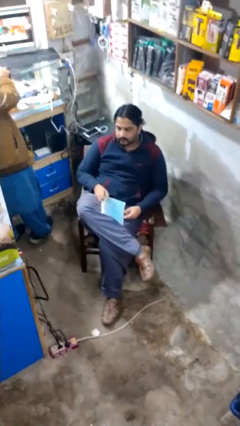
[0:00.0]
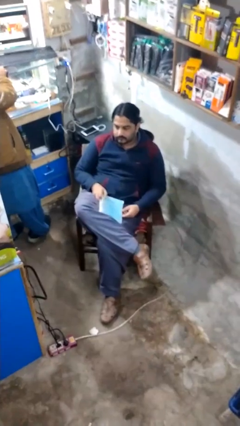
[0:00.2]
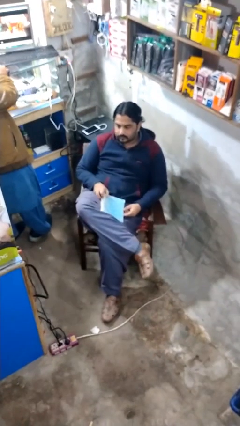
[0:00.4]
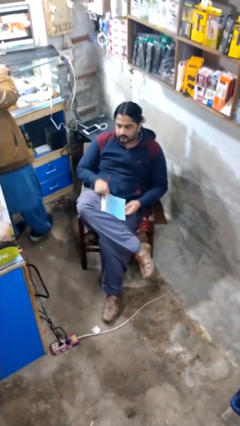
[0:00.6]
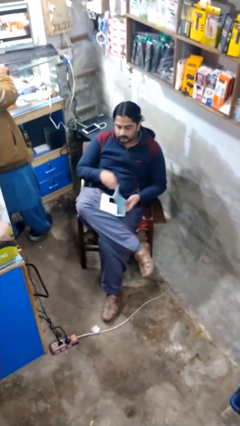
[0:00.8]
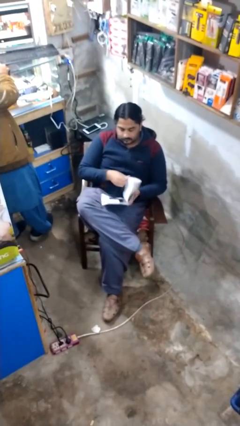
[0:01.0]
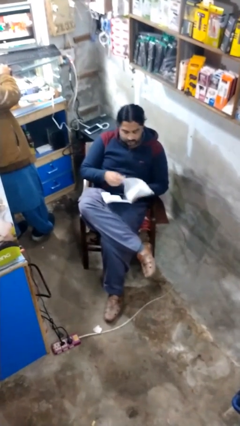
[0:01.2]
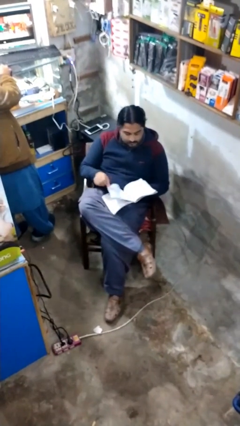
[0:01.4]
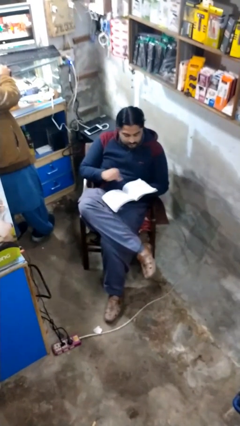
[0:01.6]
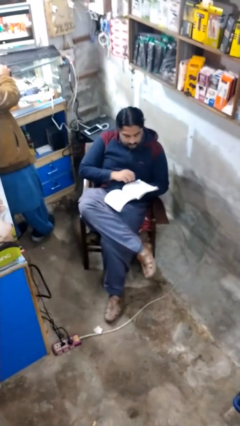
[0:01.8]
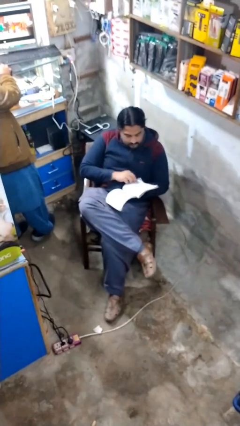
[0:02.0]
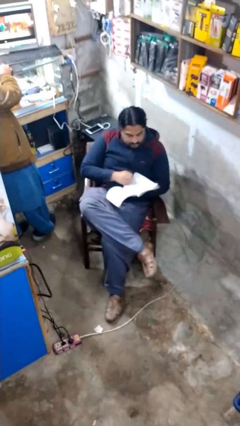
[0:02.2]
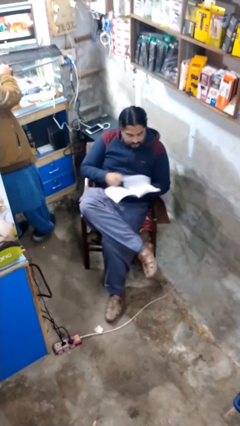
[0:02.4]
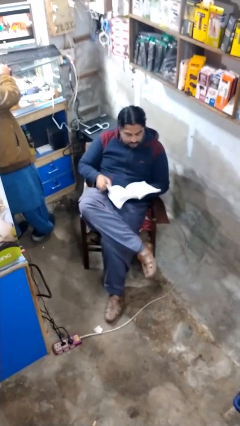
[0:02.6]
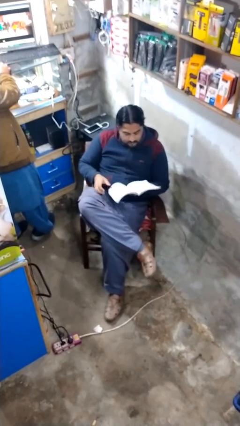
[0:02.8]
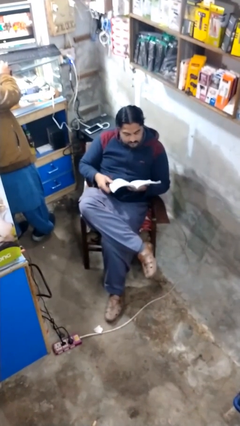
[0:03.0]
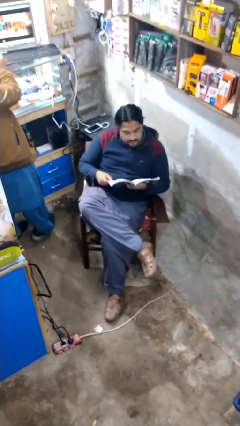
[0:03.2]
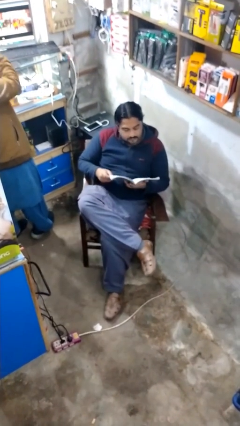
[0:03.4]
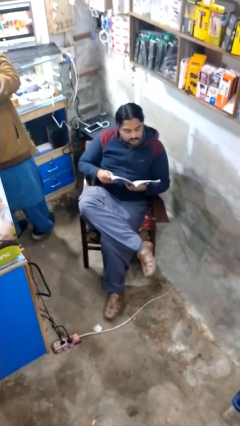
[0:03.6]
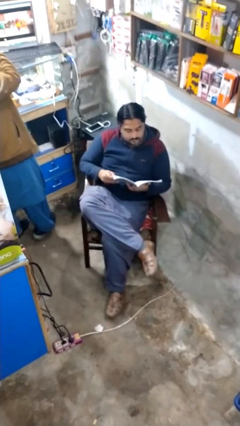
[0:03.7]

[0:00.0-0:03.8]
person reads document

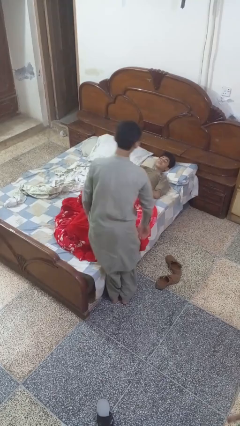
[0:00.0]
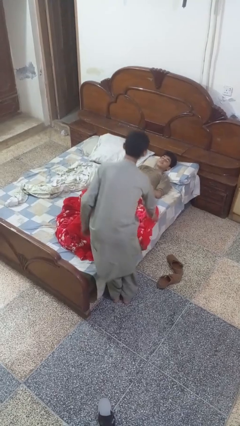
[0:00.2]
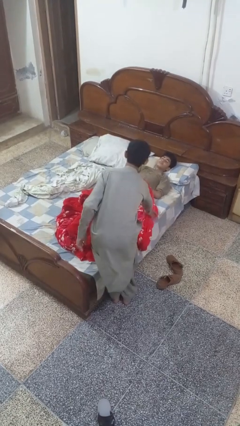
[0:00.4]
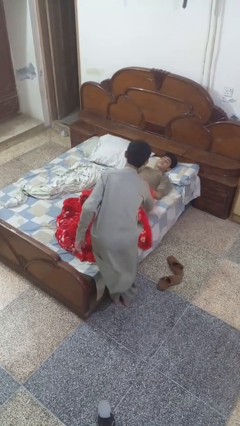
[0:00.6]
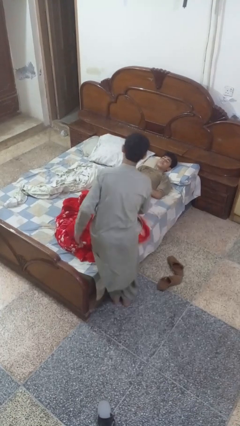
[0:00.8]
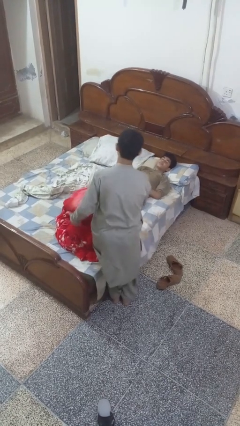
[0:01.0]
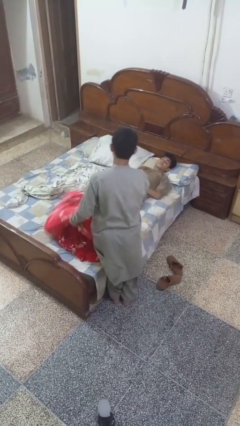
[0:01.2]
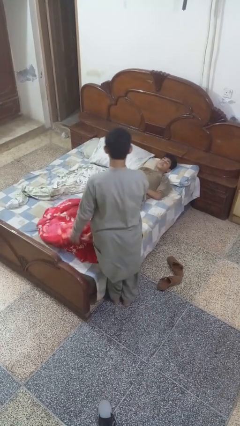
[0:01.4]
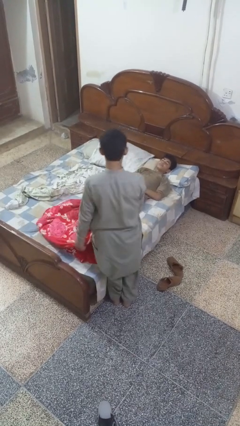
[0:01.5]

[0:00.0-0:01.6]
person uncovers friend with blanket

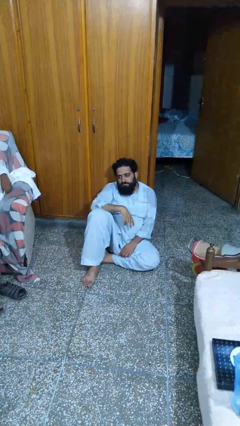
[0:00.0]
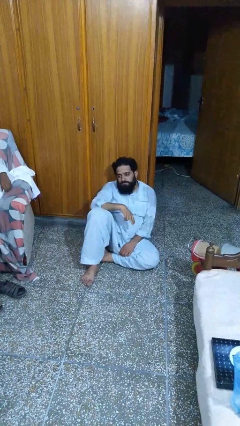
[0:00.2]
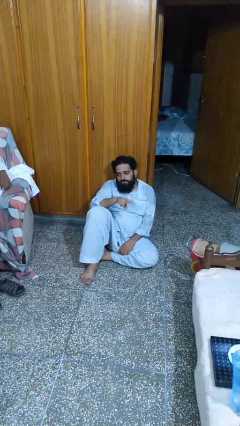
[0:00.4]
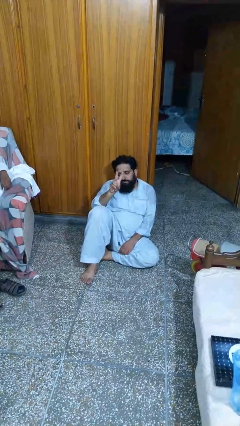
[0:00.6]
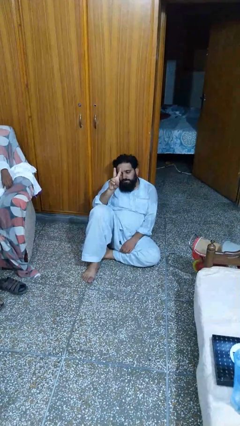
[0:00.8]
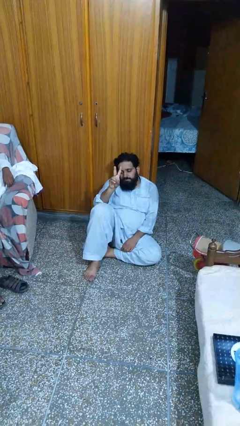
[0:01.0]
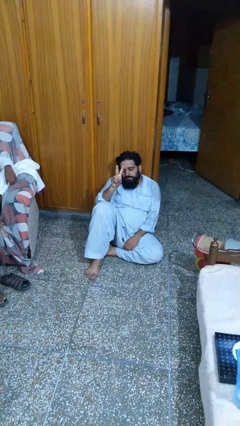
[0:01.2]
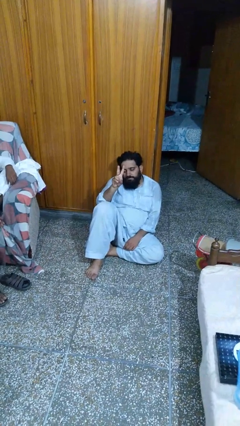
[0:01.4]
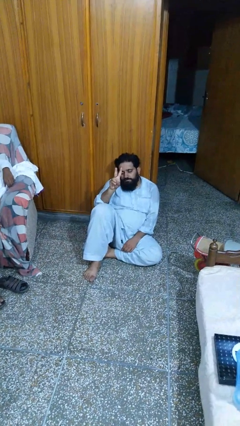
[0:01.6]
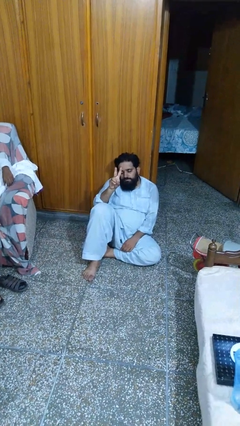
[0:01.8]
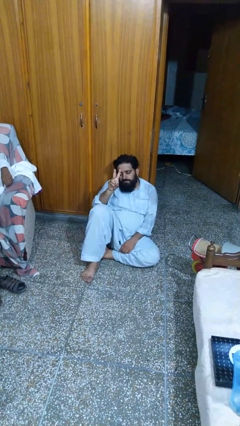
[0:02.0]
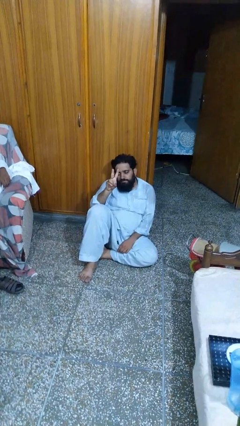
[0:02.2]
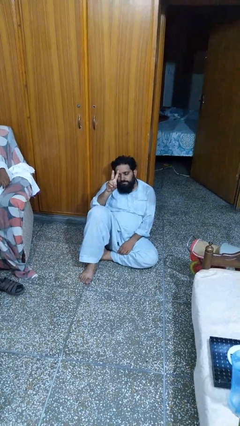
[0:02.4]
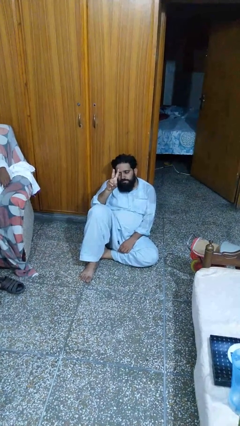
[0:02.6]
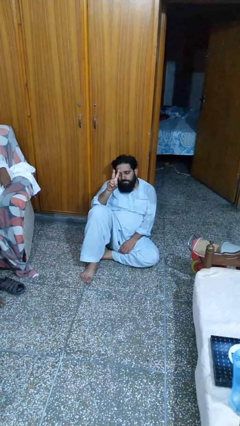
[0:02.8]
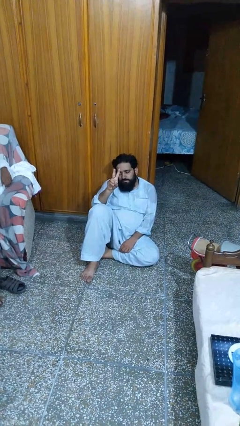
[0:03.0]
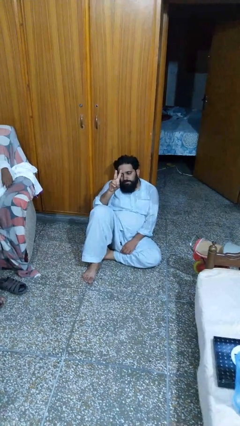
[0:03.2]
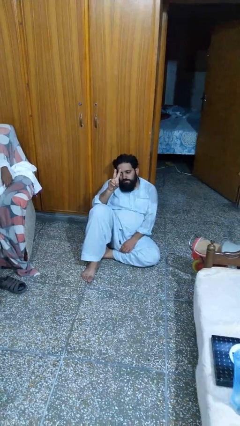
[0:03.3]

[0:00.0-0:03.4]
person gestures peace

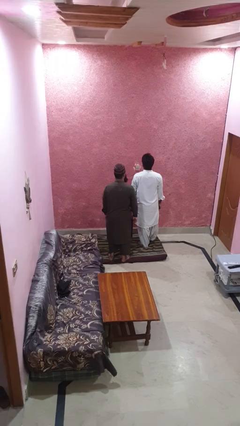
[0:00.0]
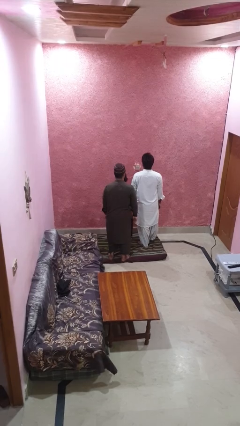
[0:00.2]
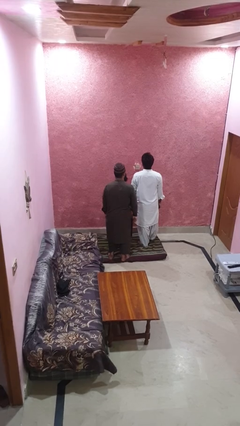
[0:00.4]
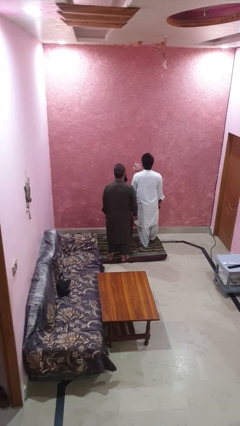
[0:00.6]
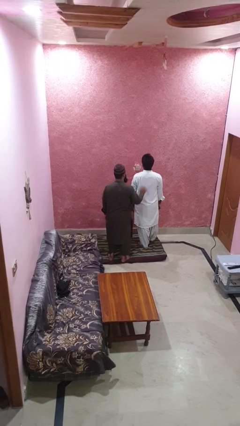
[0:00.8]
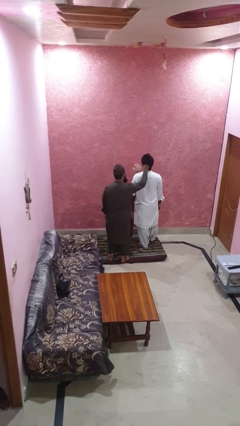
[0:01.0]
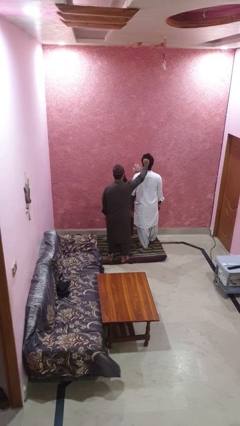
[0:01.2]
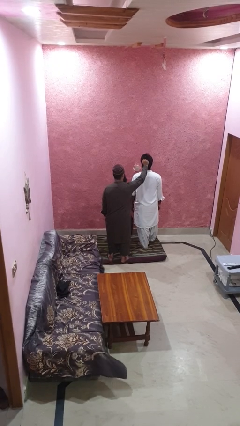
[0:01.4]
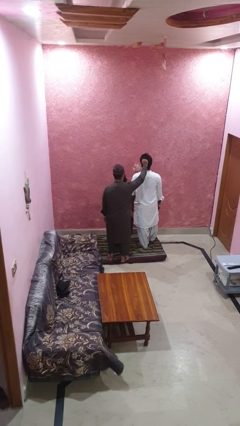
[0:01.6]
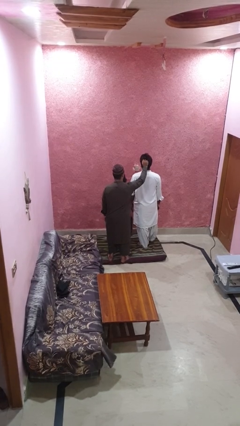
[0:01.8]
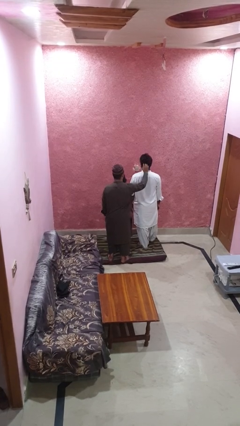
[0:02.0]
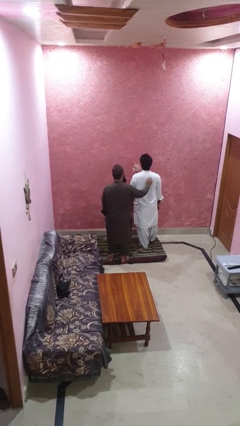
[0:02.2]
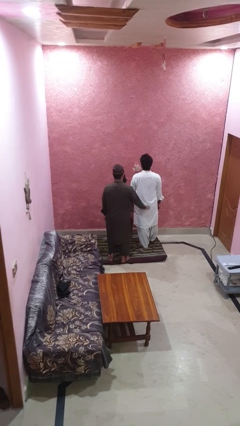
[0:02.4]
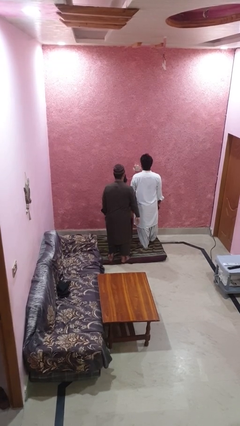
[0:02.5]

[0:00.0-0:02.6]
person grabs person by hair

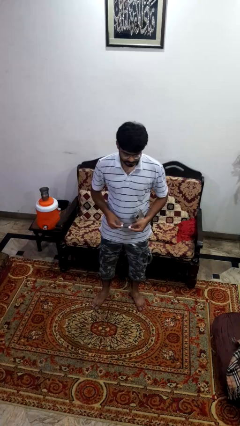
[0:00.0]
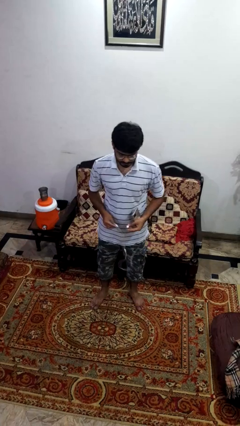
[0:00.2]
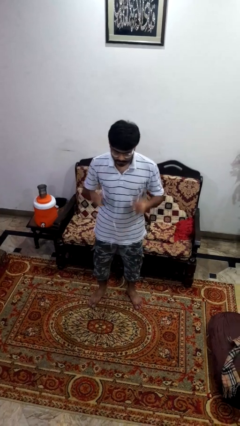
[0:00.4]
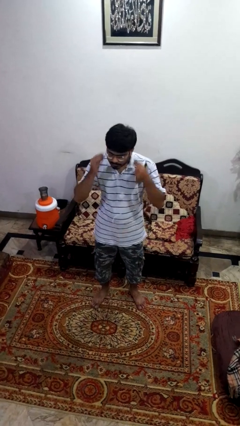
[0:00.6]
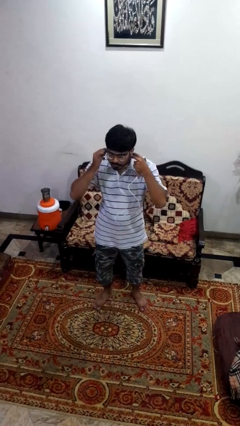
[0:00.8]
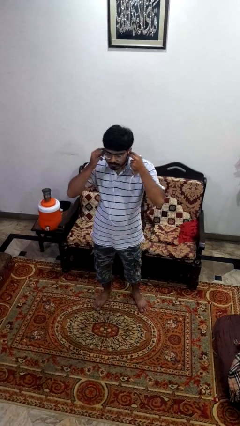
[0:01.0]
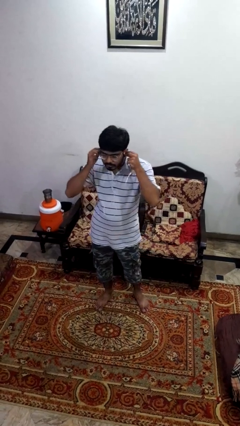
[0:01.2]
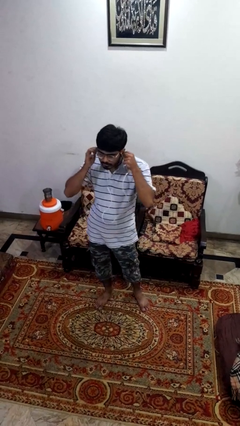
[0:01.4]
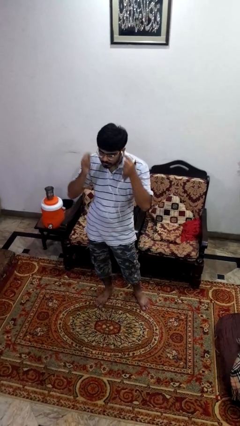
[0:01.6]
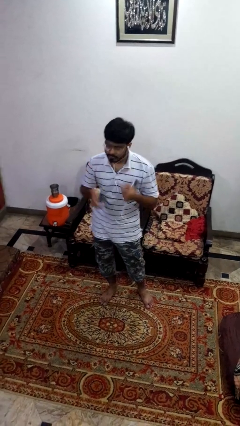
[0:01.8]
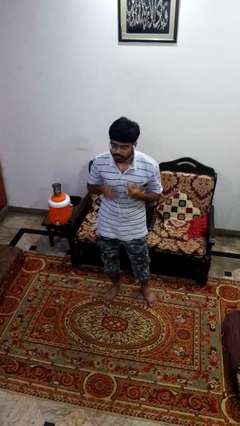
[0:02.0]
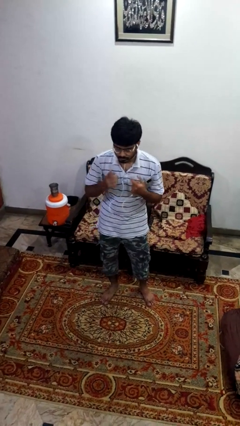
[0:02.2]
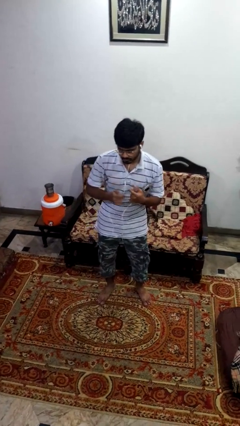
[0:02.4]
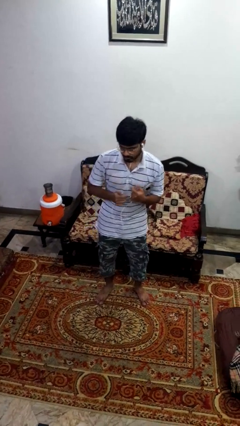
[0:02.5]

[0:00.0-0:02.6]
person puts on headphones

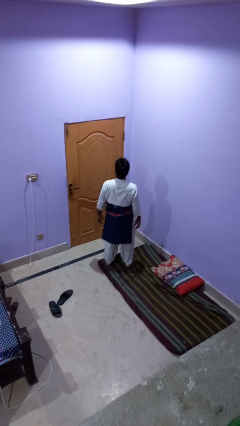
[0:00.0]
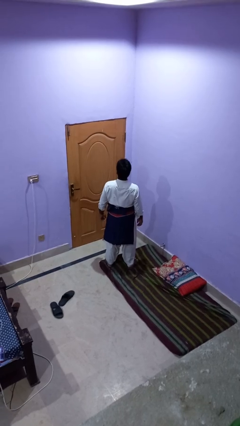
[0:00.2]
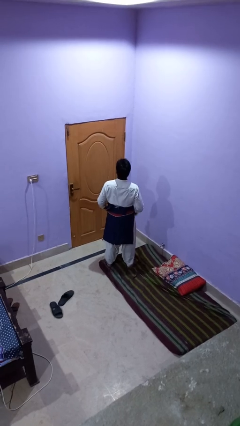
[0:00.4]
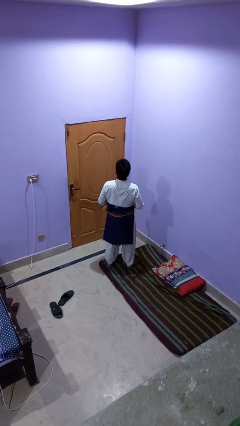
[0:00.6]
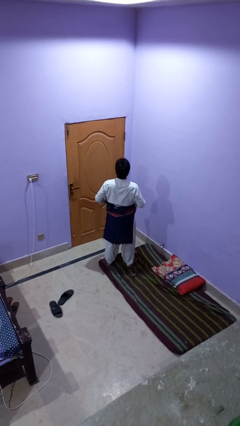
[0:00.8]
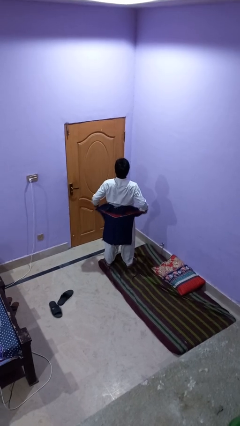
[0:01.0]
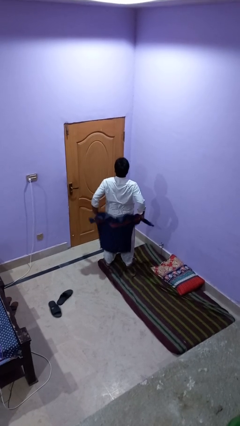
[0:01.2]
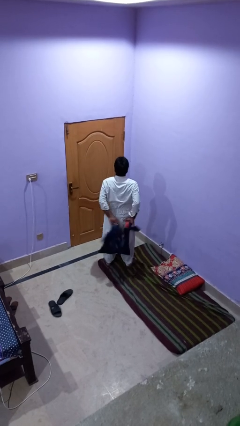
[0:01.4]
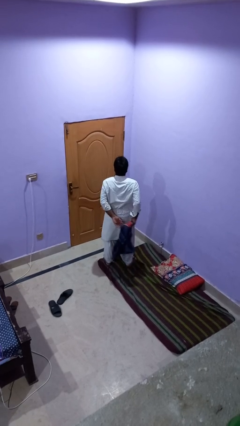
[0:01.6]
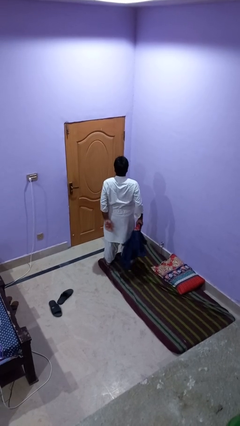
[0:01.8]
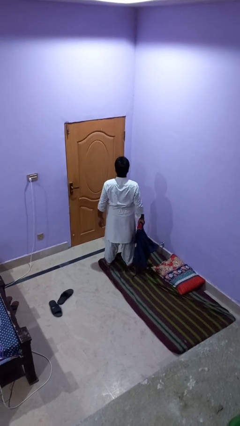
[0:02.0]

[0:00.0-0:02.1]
person unties jacket around waist

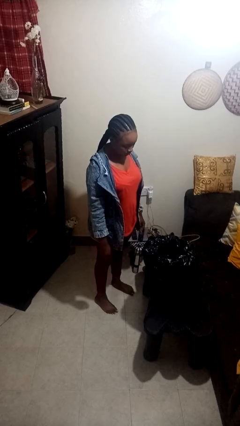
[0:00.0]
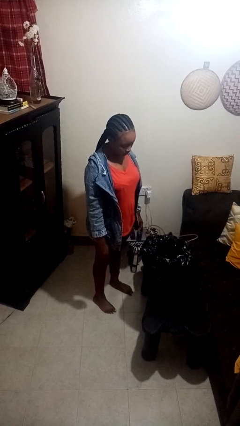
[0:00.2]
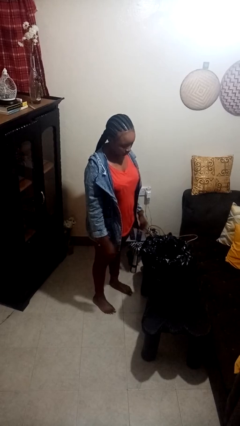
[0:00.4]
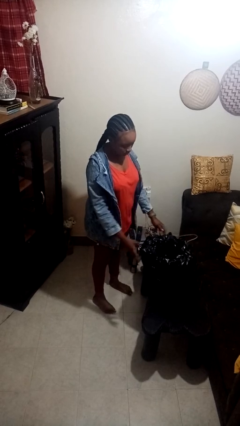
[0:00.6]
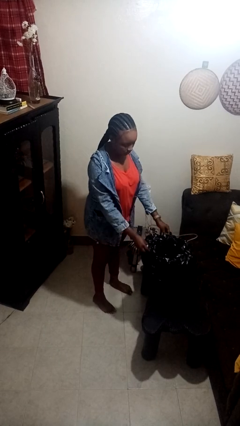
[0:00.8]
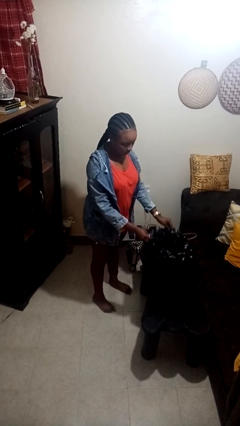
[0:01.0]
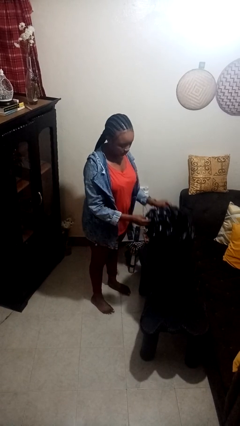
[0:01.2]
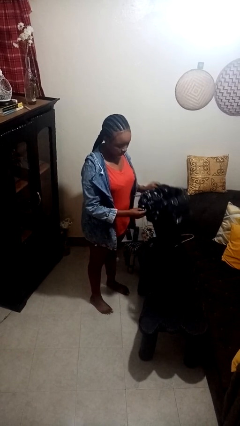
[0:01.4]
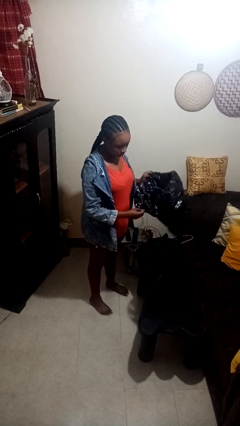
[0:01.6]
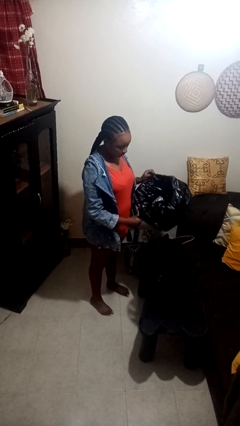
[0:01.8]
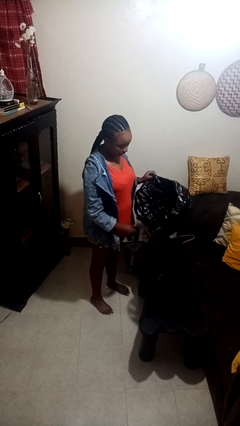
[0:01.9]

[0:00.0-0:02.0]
person removes trashbag from trashcan
